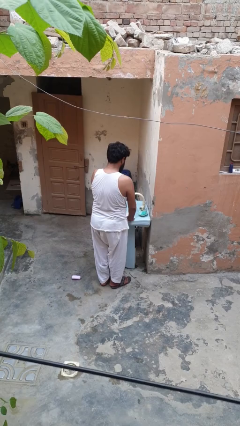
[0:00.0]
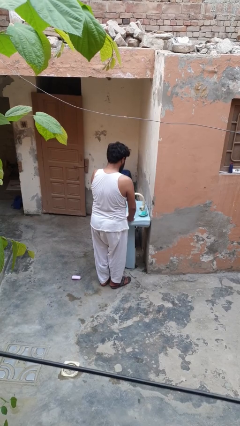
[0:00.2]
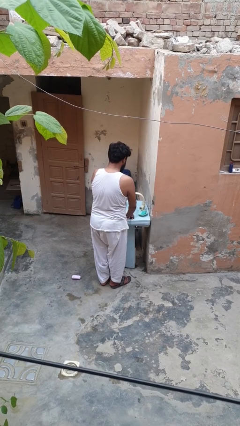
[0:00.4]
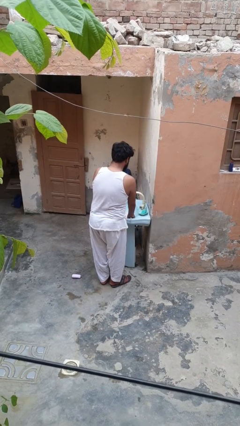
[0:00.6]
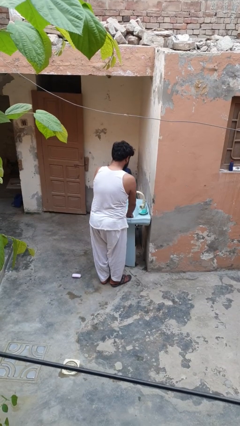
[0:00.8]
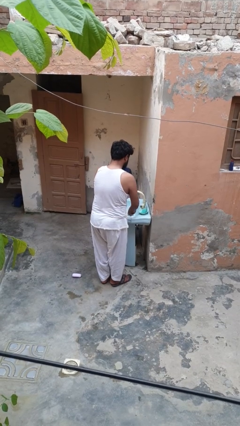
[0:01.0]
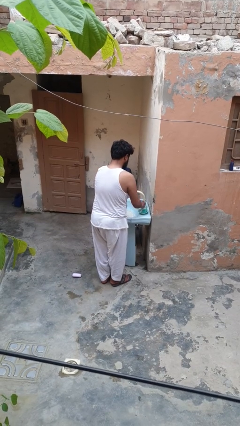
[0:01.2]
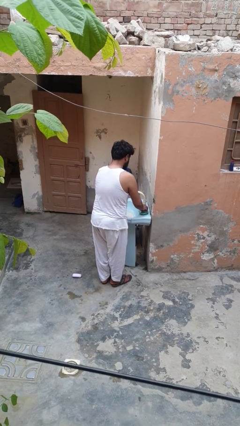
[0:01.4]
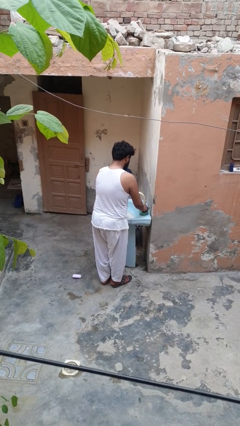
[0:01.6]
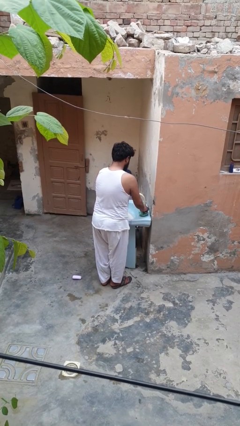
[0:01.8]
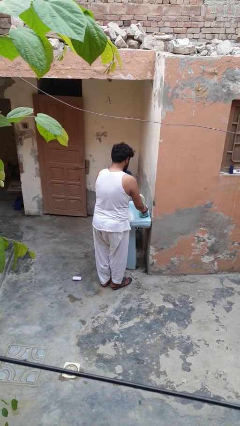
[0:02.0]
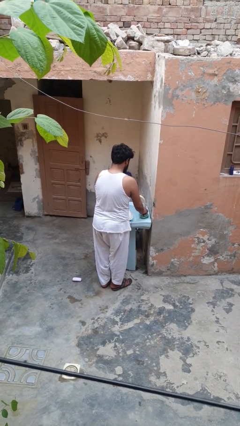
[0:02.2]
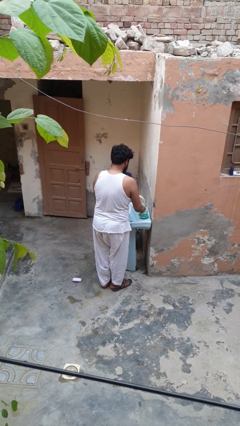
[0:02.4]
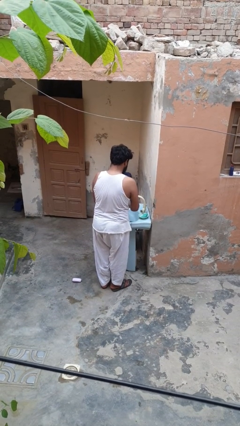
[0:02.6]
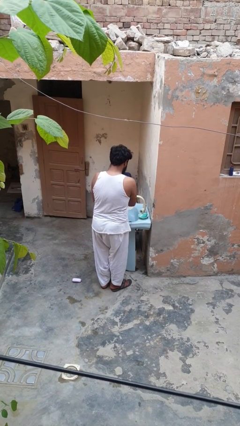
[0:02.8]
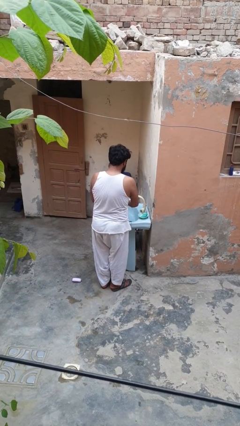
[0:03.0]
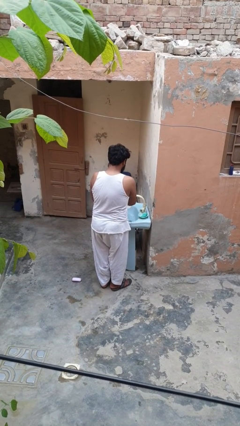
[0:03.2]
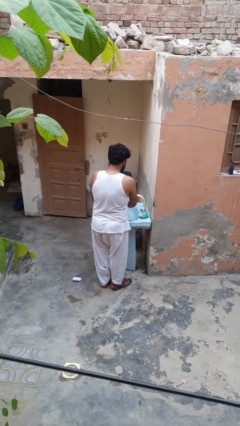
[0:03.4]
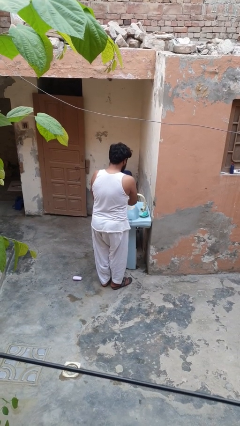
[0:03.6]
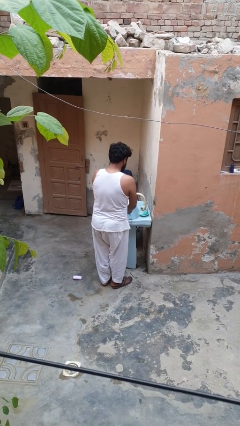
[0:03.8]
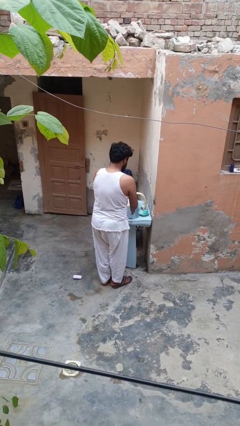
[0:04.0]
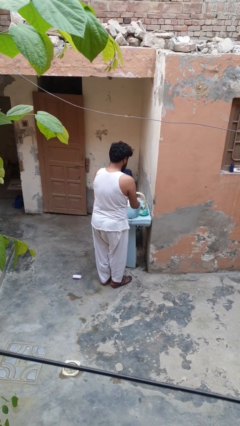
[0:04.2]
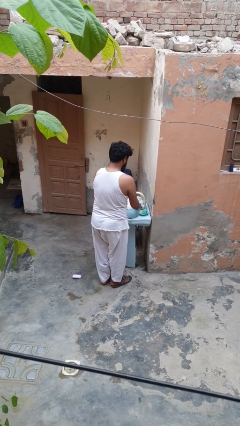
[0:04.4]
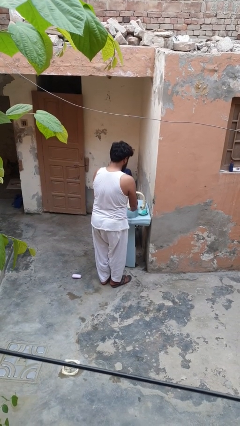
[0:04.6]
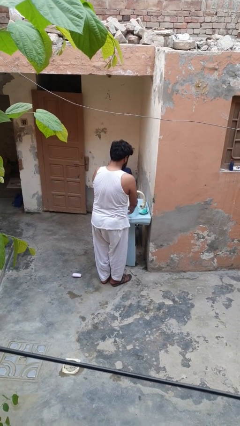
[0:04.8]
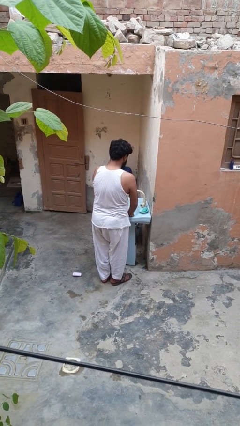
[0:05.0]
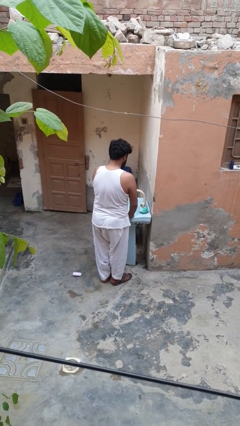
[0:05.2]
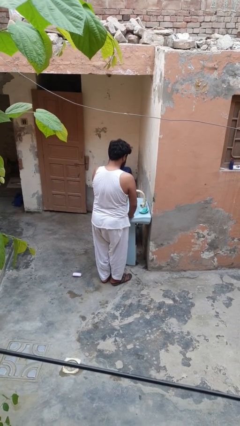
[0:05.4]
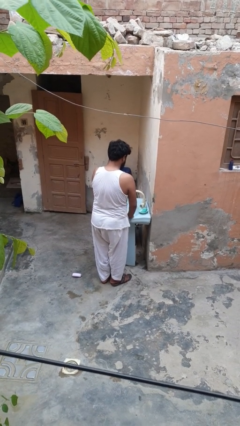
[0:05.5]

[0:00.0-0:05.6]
person washes dish

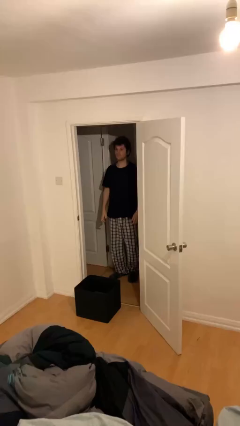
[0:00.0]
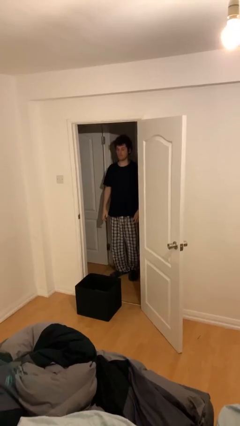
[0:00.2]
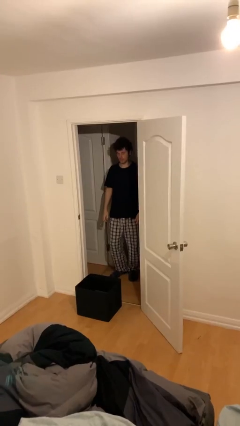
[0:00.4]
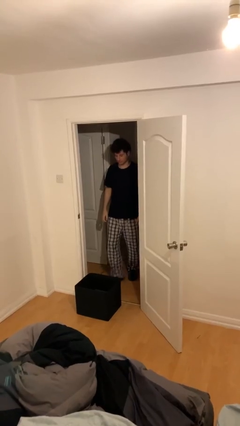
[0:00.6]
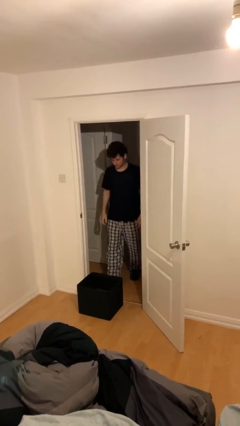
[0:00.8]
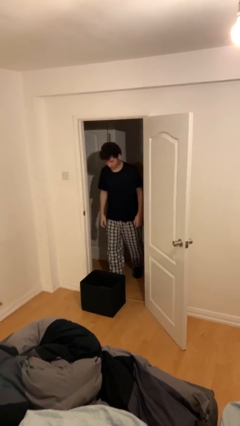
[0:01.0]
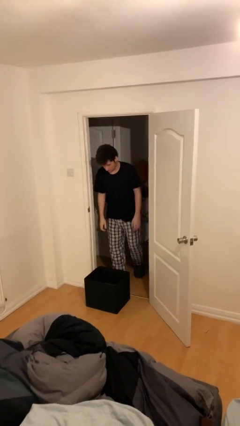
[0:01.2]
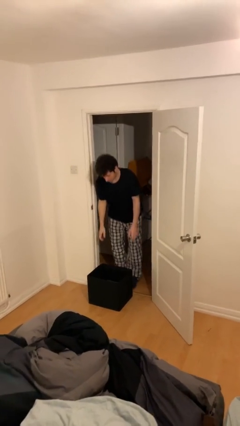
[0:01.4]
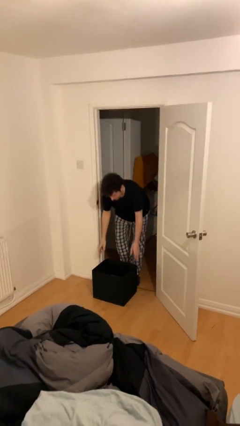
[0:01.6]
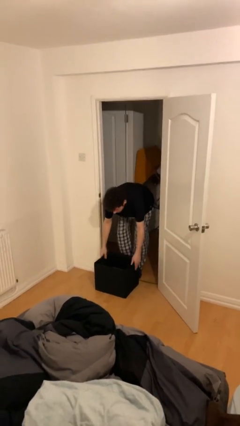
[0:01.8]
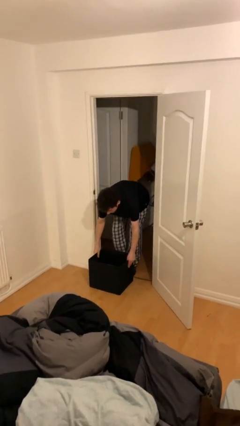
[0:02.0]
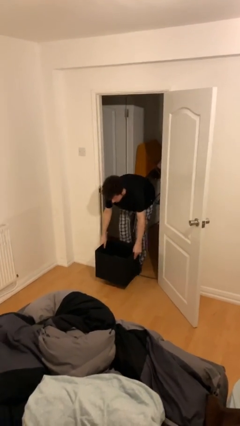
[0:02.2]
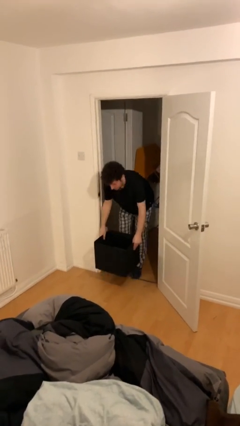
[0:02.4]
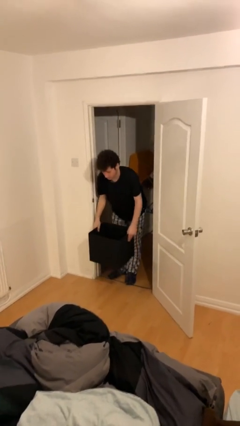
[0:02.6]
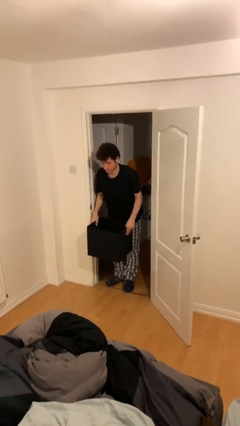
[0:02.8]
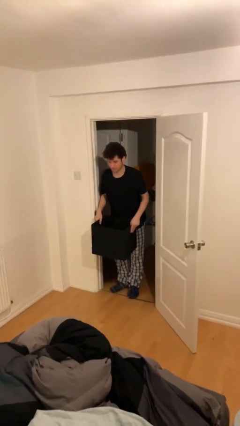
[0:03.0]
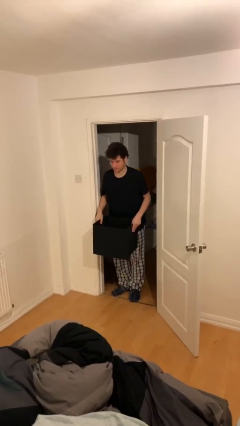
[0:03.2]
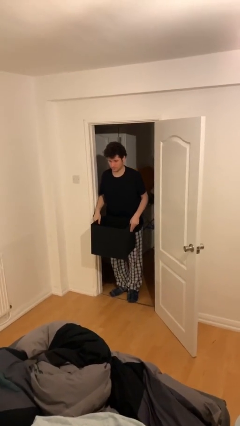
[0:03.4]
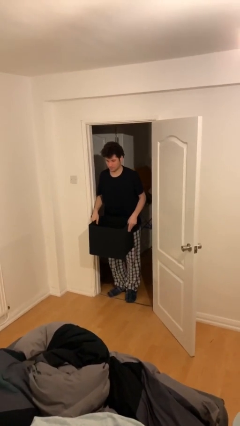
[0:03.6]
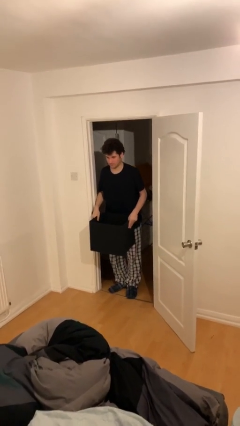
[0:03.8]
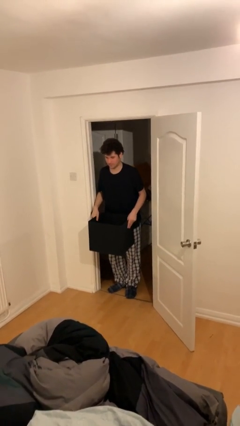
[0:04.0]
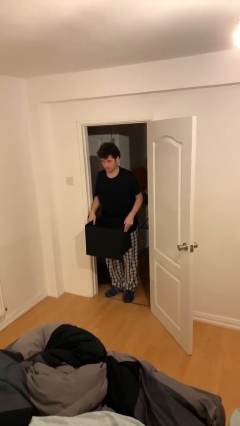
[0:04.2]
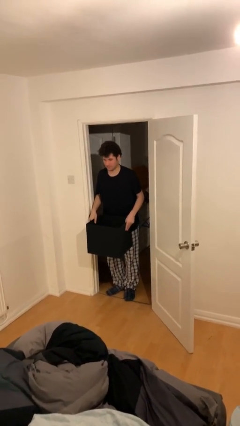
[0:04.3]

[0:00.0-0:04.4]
person picks up object from floor

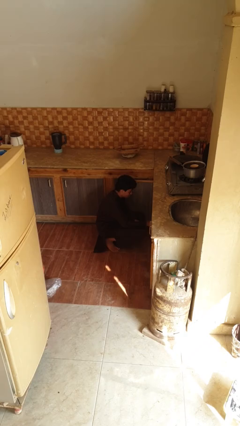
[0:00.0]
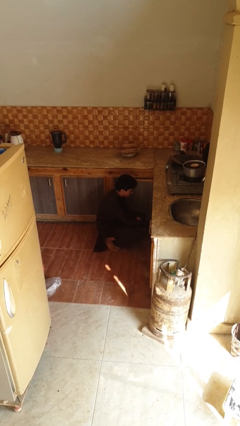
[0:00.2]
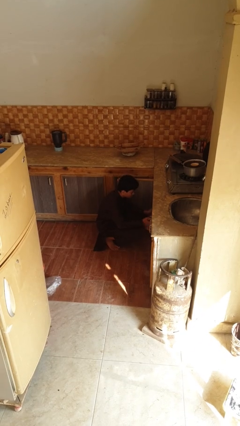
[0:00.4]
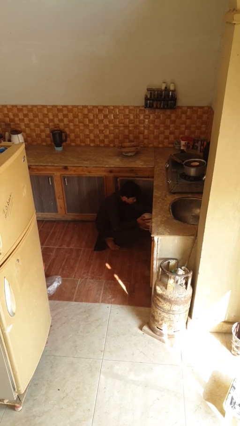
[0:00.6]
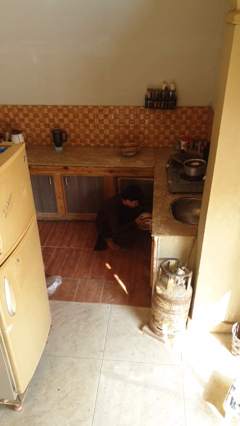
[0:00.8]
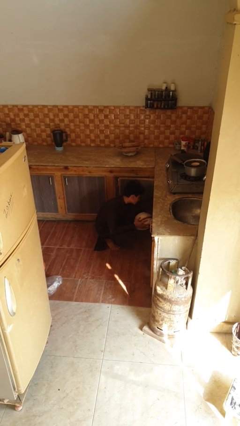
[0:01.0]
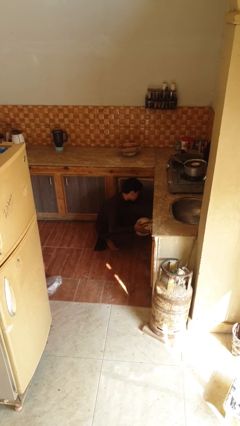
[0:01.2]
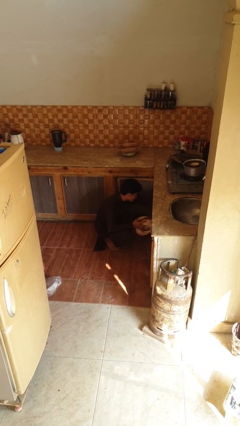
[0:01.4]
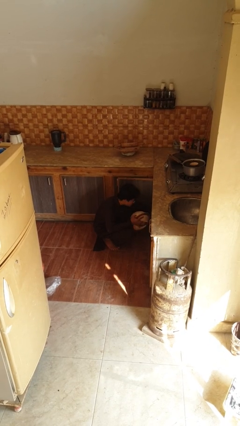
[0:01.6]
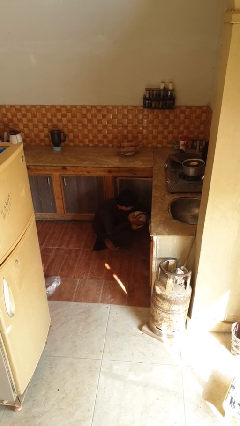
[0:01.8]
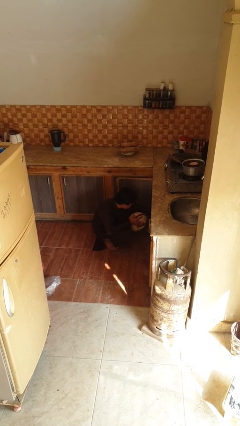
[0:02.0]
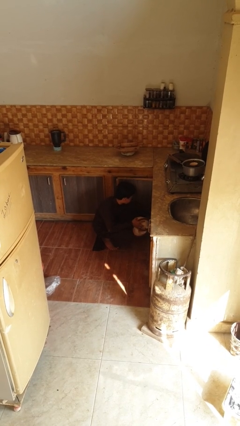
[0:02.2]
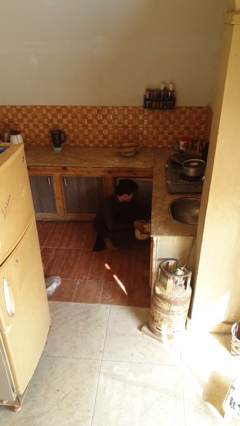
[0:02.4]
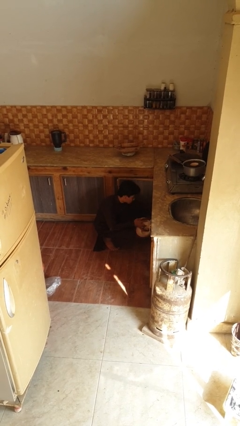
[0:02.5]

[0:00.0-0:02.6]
person searches in kitchen drawer

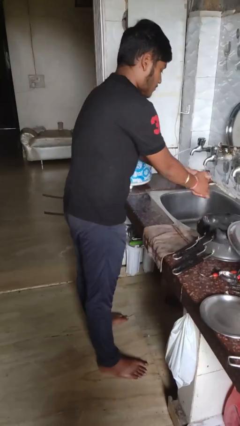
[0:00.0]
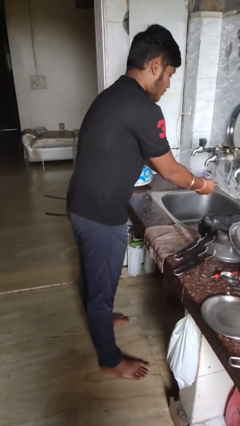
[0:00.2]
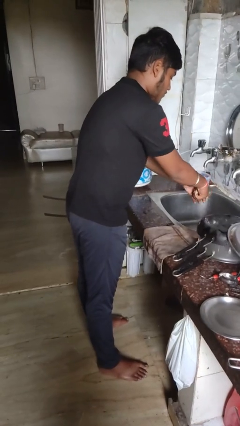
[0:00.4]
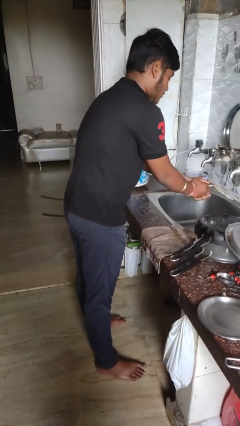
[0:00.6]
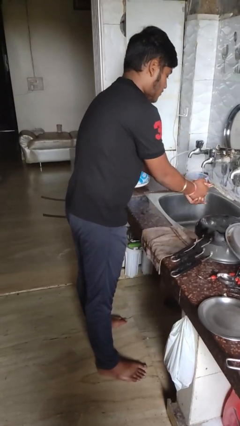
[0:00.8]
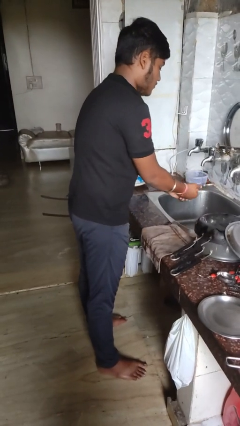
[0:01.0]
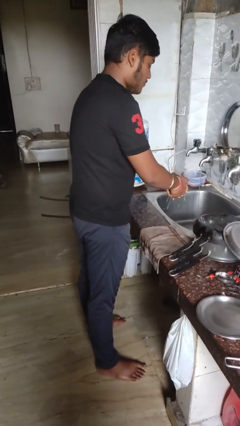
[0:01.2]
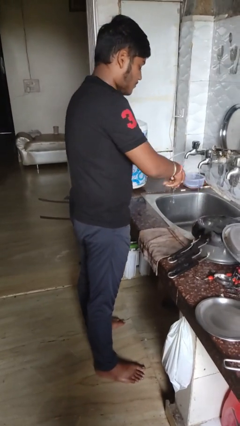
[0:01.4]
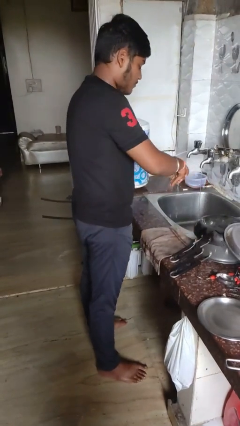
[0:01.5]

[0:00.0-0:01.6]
person washes hands

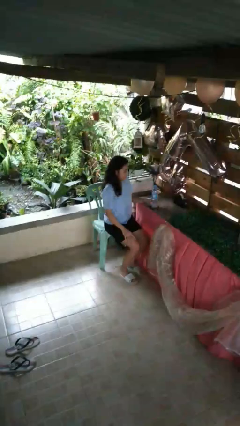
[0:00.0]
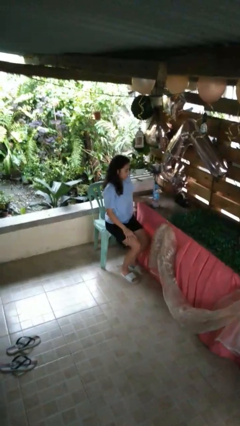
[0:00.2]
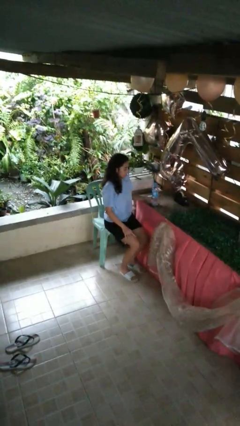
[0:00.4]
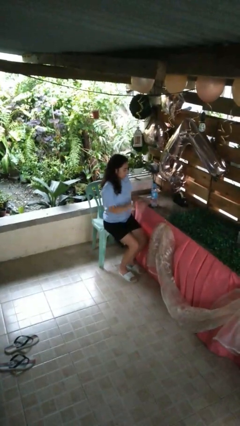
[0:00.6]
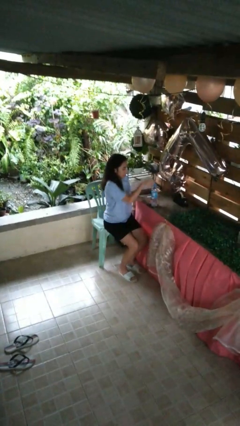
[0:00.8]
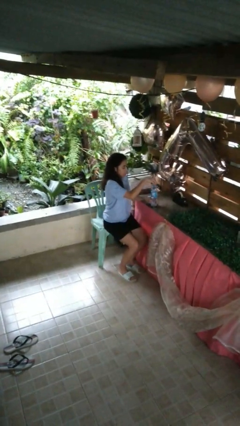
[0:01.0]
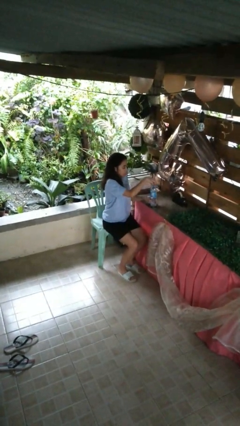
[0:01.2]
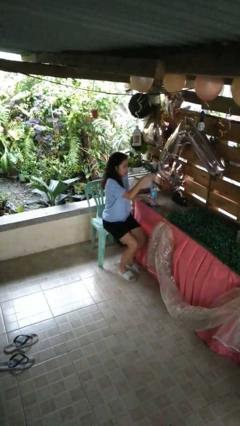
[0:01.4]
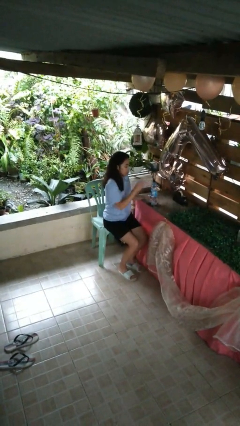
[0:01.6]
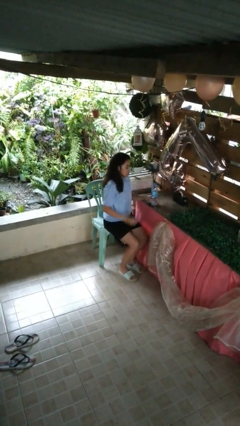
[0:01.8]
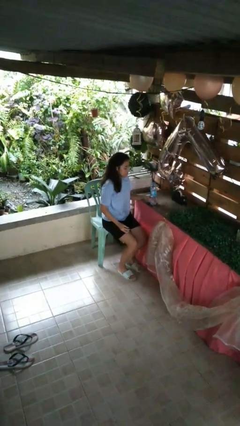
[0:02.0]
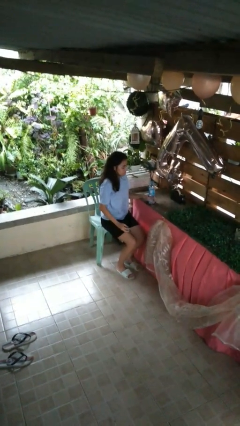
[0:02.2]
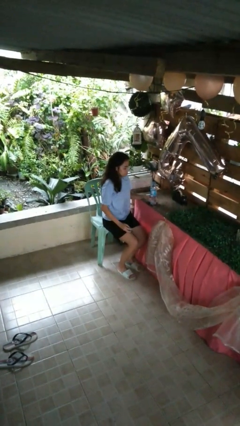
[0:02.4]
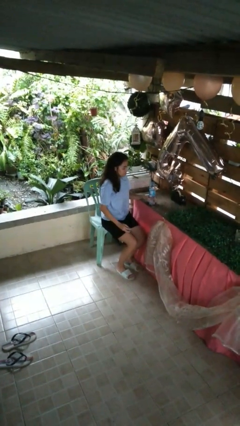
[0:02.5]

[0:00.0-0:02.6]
person unscrews lid from bottle

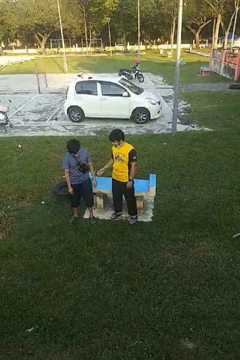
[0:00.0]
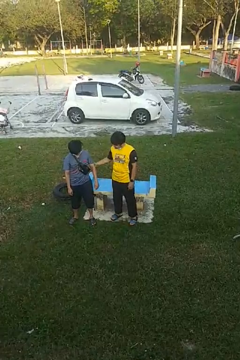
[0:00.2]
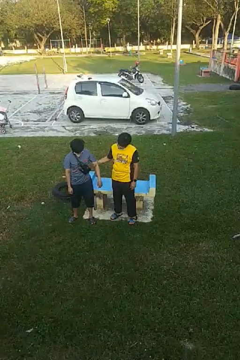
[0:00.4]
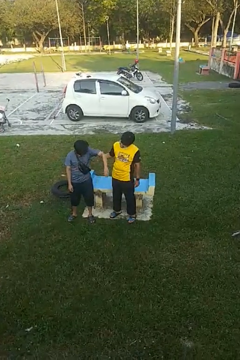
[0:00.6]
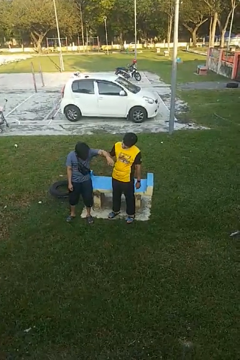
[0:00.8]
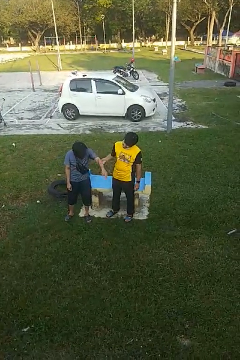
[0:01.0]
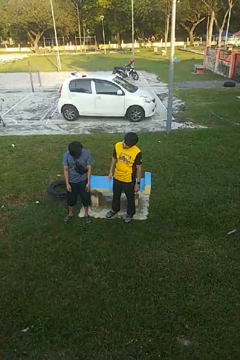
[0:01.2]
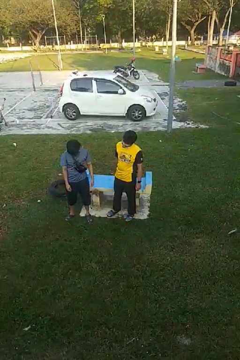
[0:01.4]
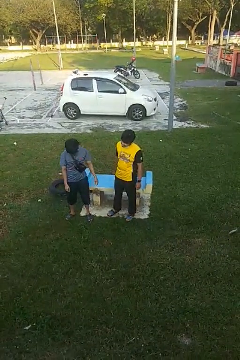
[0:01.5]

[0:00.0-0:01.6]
person grabs person by bicep
